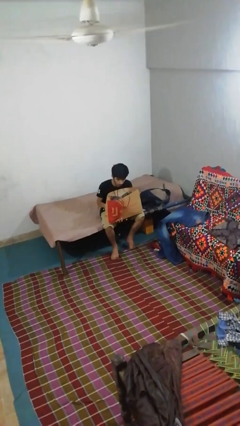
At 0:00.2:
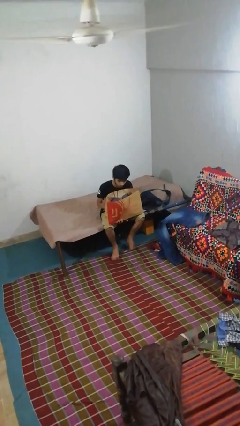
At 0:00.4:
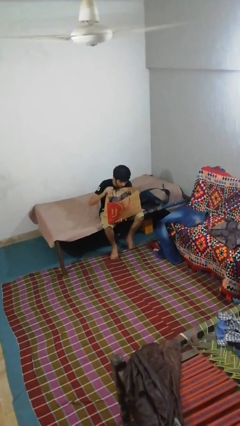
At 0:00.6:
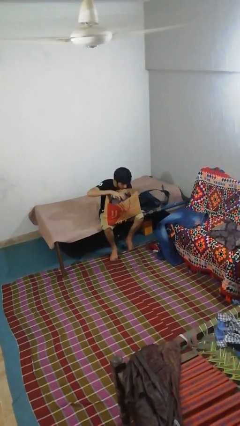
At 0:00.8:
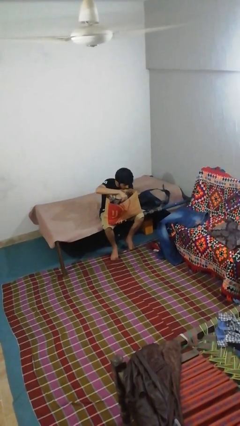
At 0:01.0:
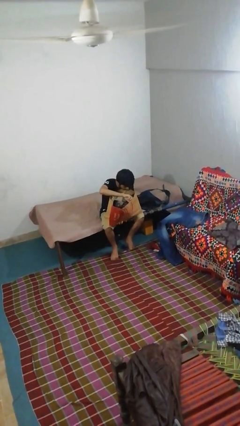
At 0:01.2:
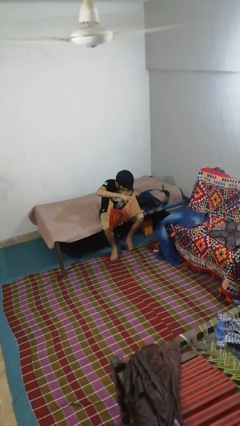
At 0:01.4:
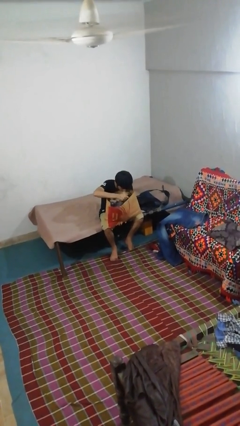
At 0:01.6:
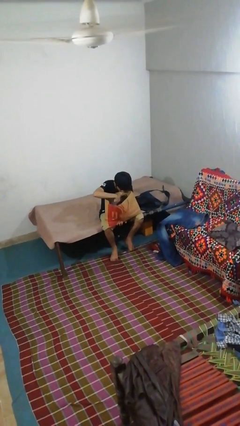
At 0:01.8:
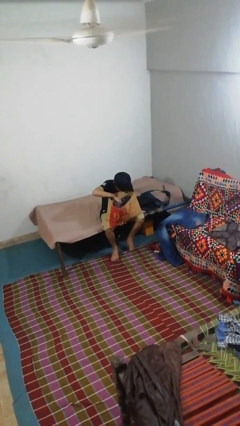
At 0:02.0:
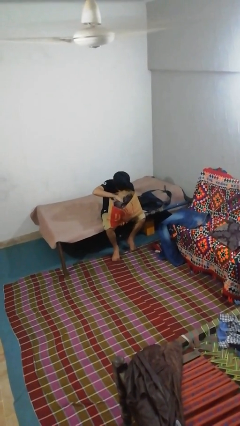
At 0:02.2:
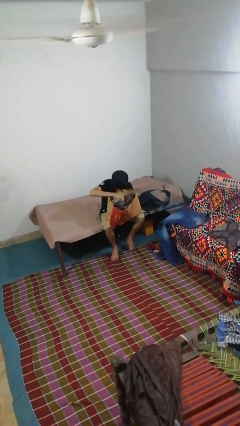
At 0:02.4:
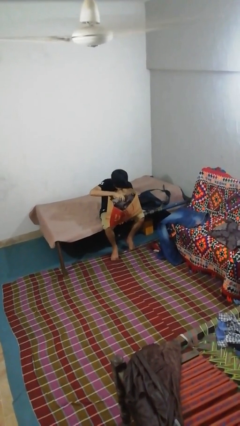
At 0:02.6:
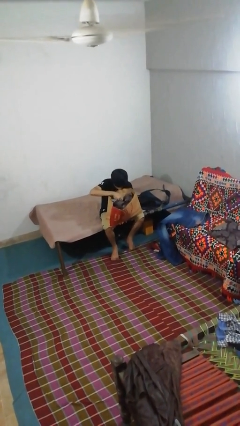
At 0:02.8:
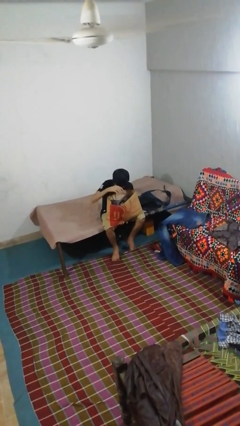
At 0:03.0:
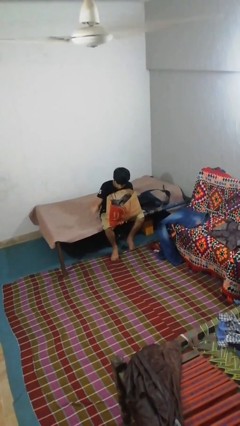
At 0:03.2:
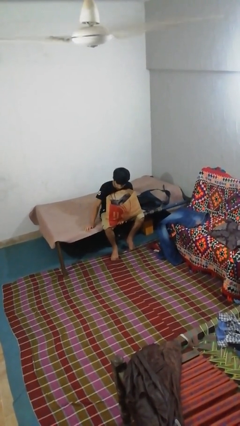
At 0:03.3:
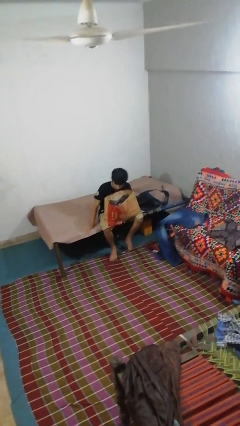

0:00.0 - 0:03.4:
person searches in bag

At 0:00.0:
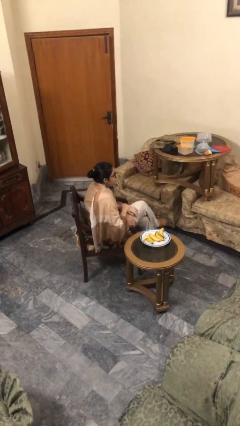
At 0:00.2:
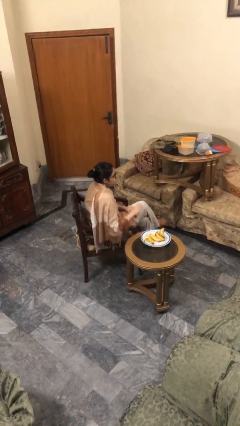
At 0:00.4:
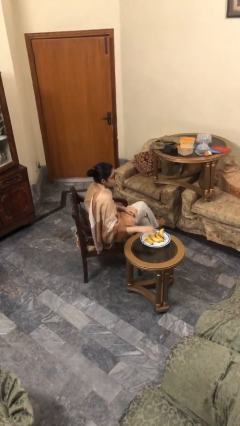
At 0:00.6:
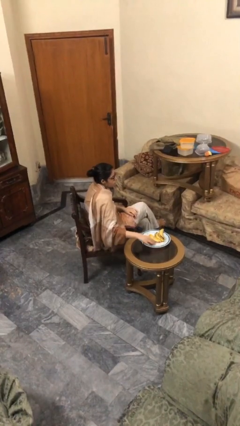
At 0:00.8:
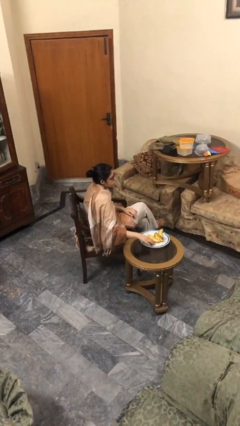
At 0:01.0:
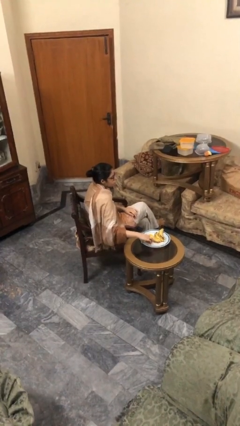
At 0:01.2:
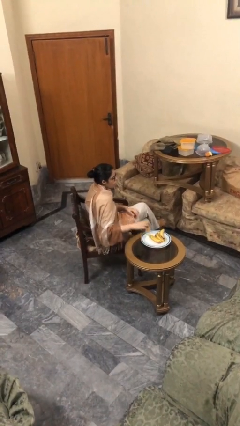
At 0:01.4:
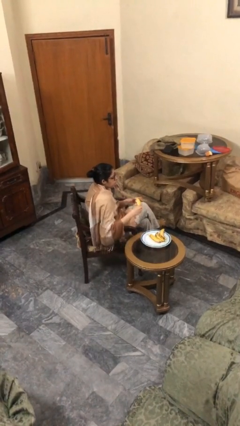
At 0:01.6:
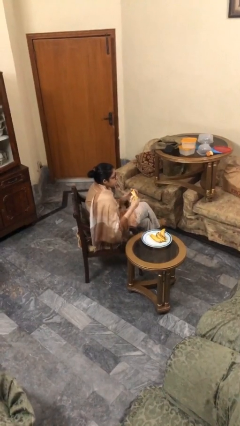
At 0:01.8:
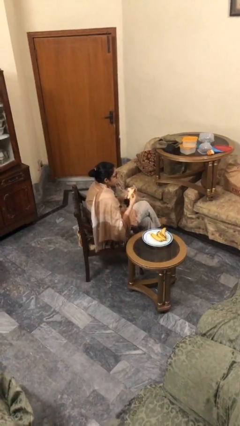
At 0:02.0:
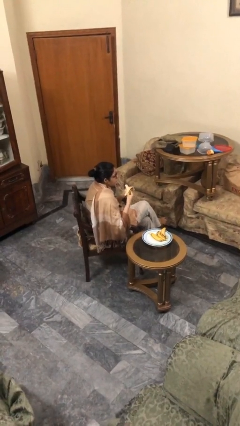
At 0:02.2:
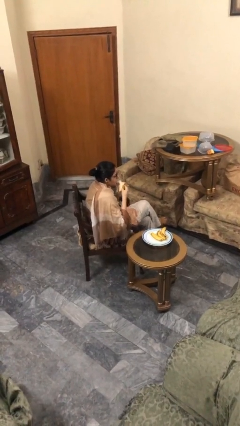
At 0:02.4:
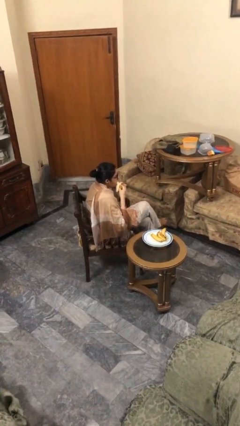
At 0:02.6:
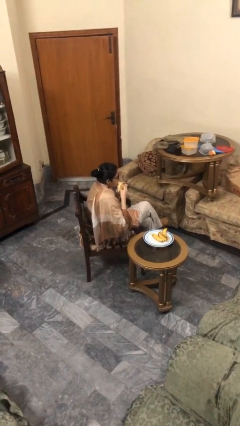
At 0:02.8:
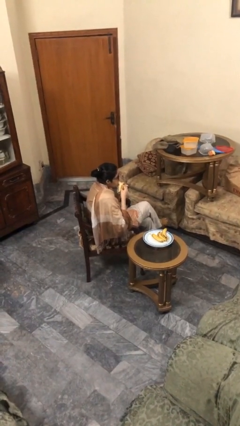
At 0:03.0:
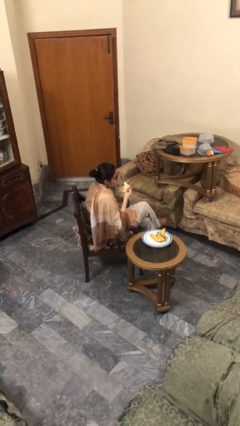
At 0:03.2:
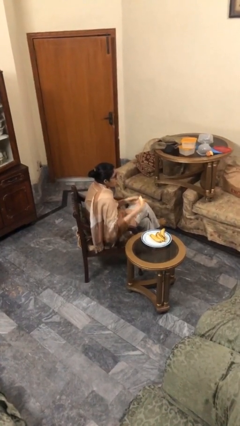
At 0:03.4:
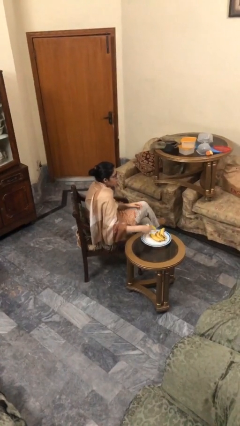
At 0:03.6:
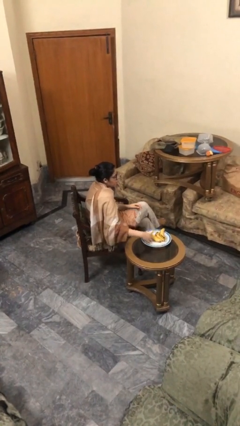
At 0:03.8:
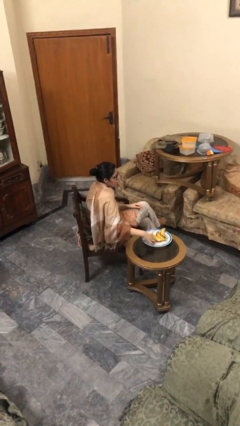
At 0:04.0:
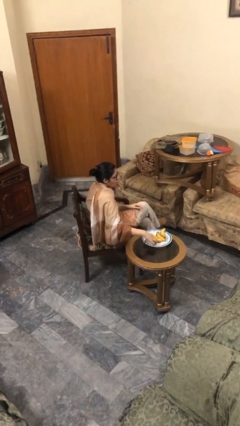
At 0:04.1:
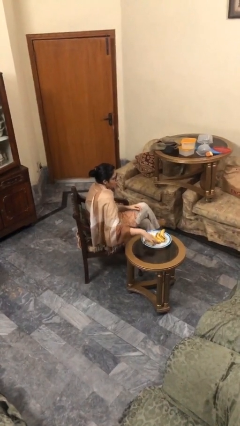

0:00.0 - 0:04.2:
person eats banana

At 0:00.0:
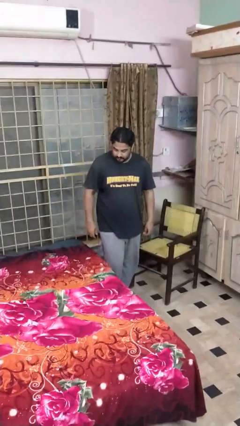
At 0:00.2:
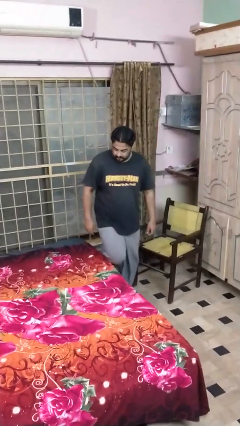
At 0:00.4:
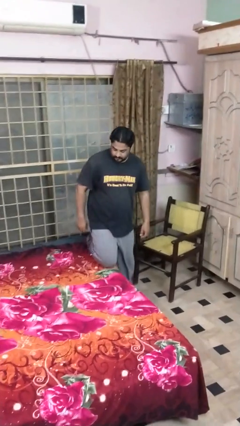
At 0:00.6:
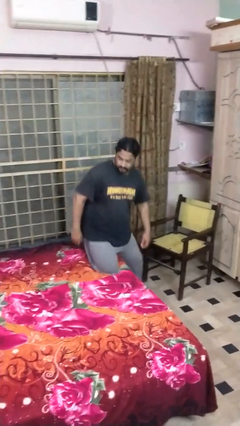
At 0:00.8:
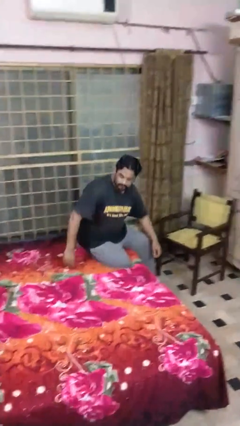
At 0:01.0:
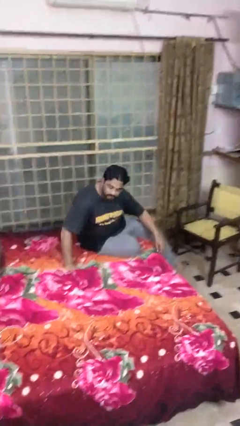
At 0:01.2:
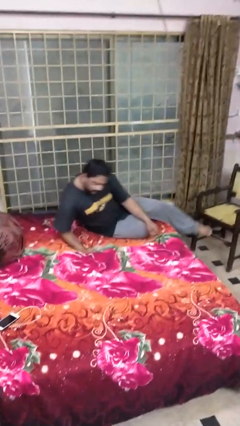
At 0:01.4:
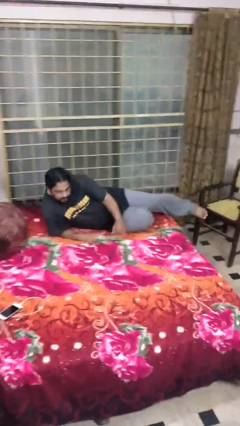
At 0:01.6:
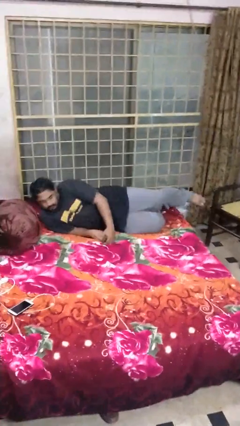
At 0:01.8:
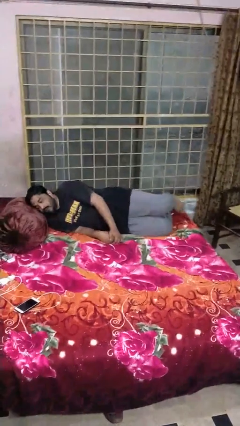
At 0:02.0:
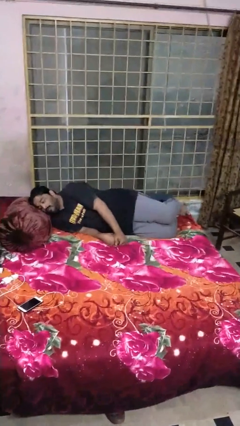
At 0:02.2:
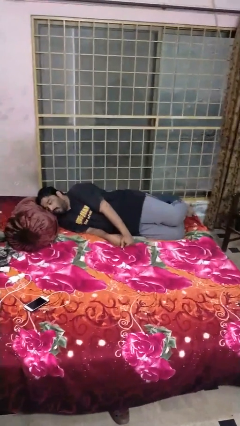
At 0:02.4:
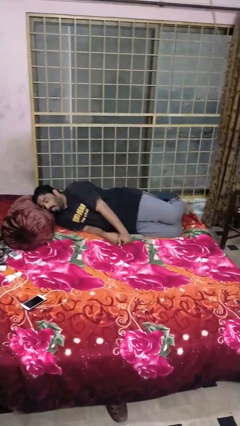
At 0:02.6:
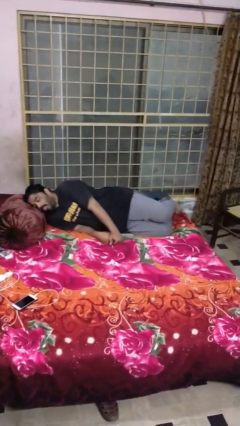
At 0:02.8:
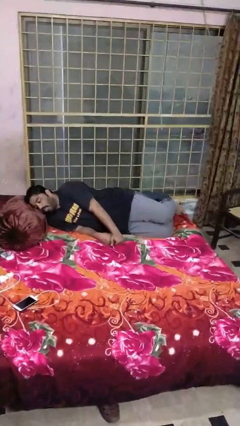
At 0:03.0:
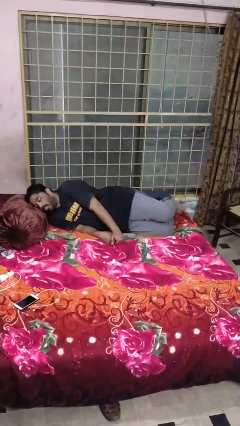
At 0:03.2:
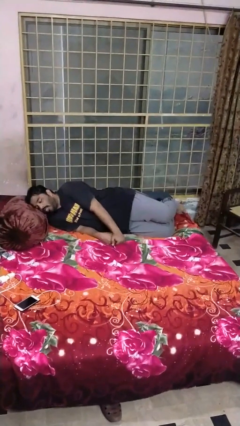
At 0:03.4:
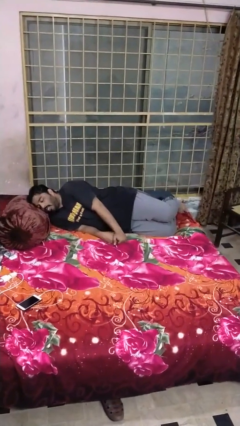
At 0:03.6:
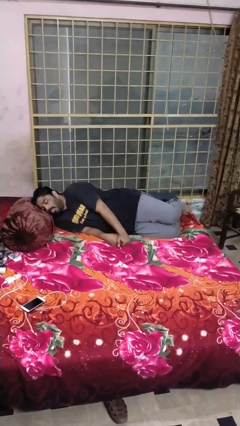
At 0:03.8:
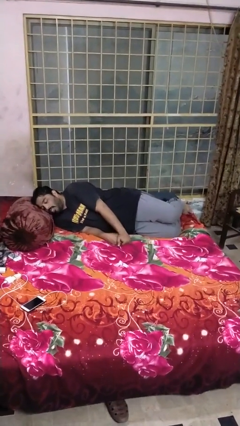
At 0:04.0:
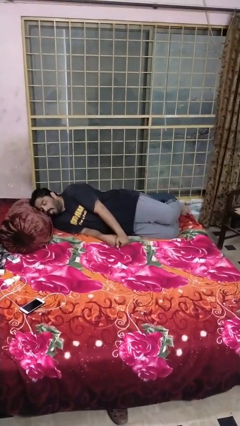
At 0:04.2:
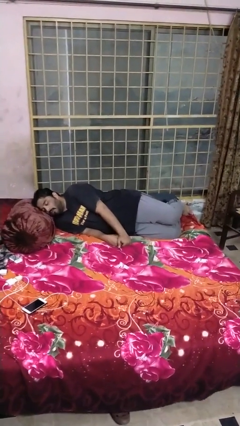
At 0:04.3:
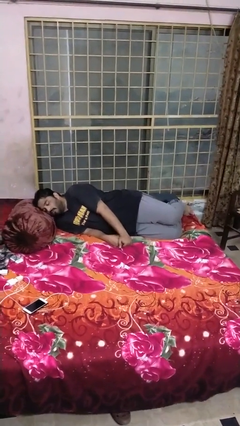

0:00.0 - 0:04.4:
person lies down on bed

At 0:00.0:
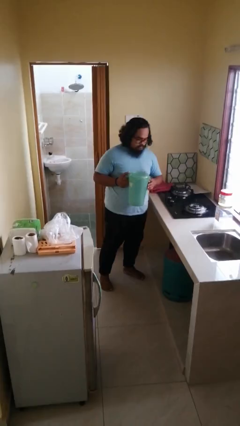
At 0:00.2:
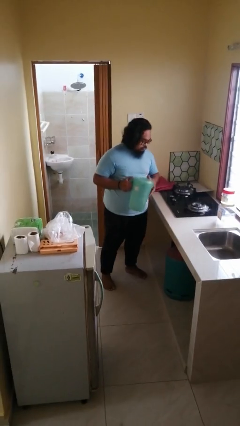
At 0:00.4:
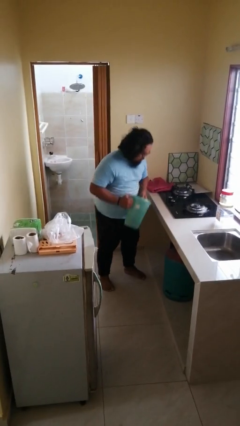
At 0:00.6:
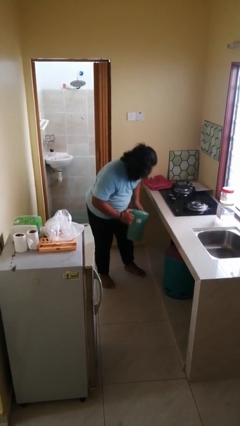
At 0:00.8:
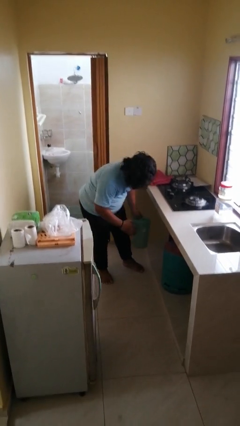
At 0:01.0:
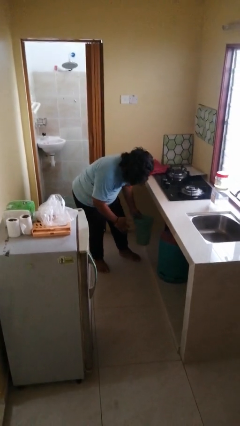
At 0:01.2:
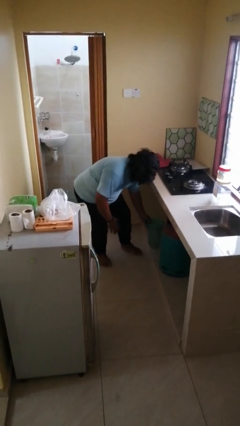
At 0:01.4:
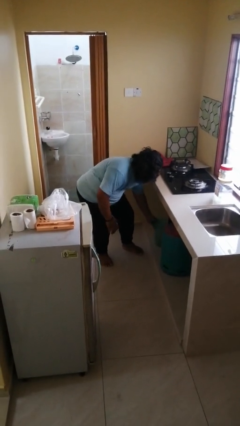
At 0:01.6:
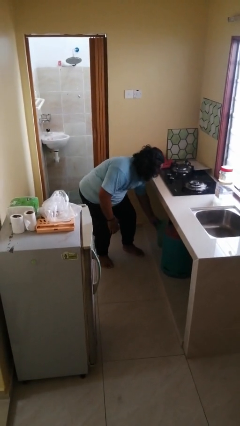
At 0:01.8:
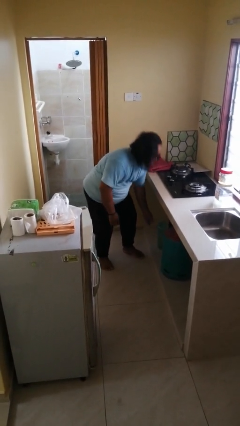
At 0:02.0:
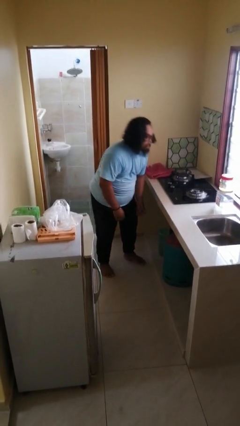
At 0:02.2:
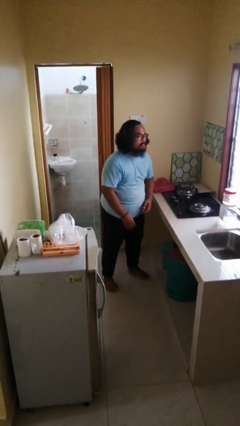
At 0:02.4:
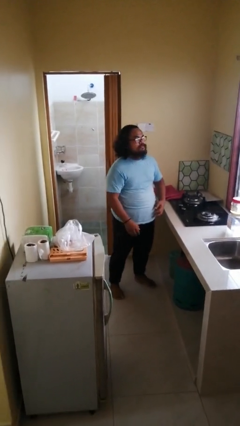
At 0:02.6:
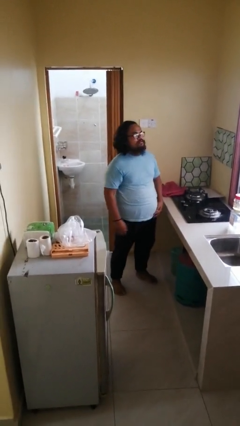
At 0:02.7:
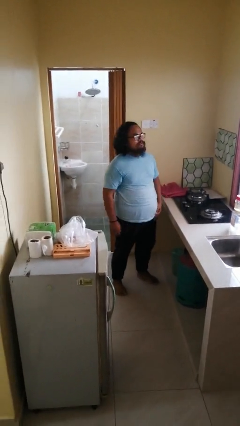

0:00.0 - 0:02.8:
person puts down object into cabinet

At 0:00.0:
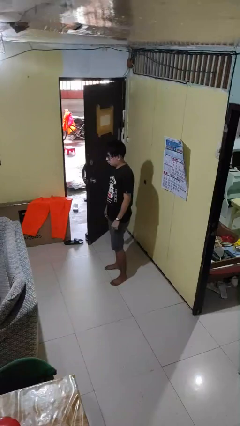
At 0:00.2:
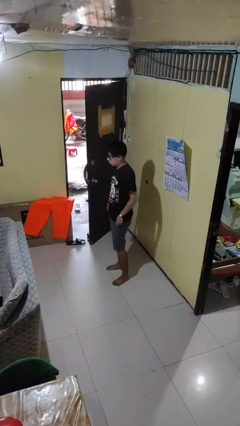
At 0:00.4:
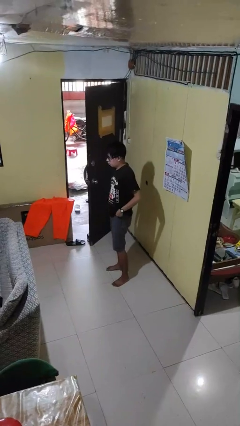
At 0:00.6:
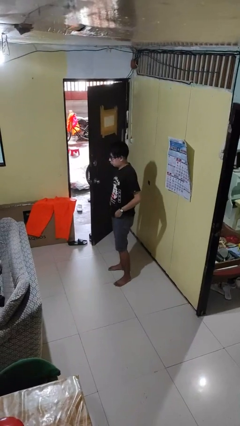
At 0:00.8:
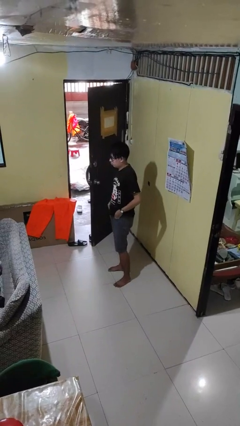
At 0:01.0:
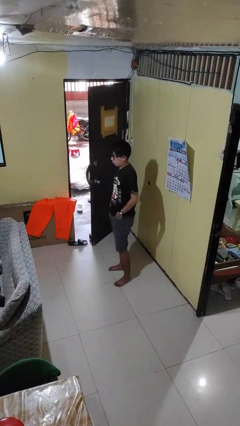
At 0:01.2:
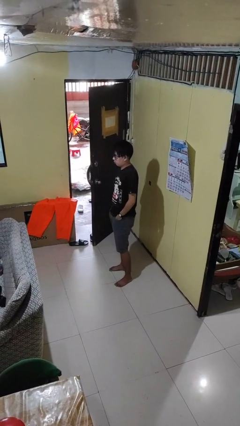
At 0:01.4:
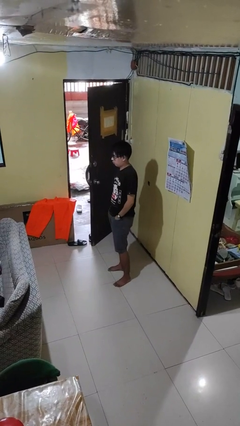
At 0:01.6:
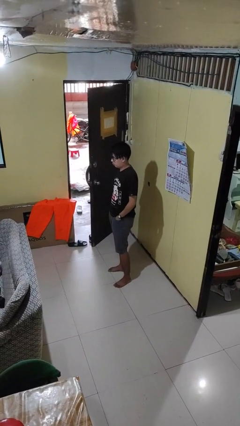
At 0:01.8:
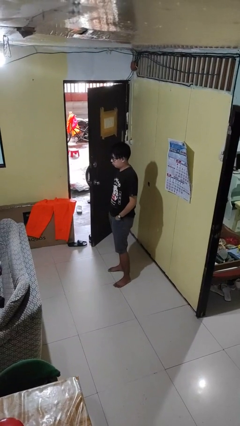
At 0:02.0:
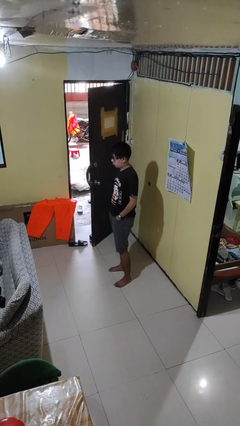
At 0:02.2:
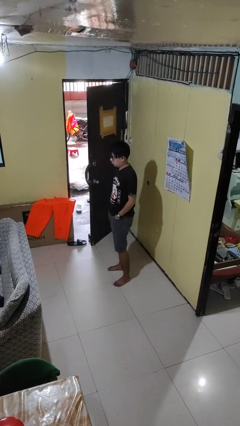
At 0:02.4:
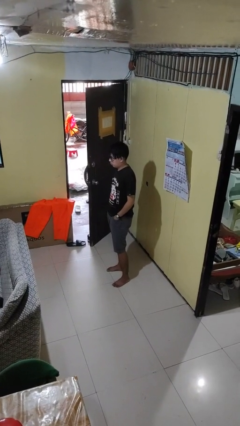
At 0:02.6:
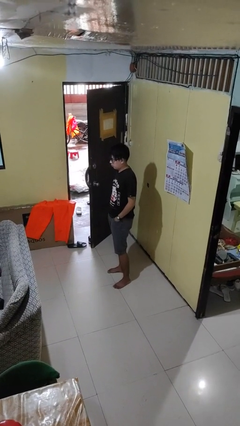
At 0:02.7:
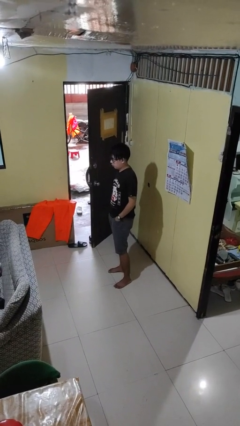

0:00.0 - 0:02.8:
person puts hands in back pockets

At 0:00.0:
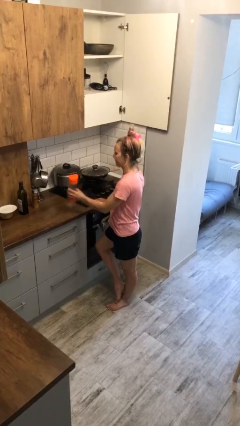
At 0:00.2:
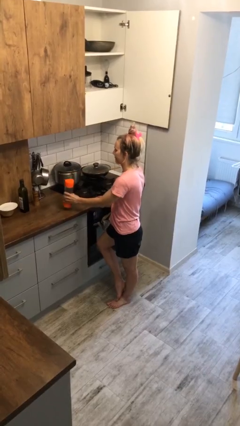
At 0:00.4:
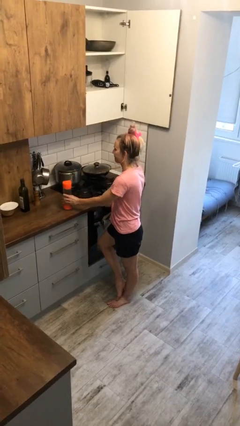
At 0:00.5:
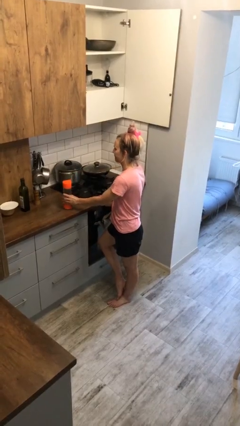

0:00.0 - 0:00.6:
person puts down object on countertop
